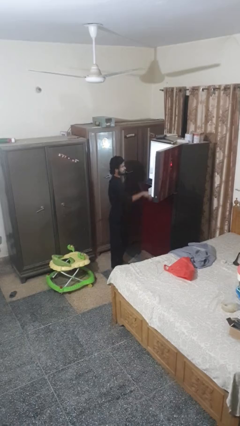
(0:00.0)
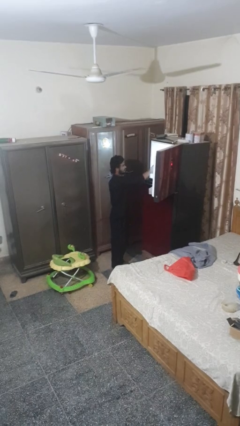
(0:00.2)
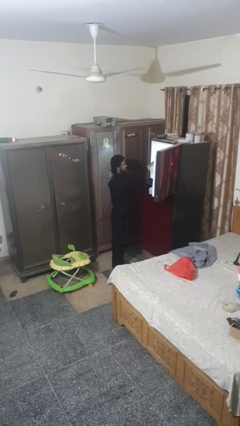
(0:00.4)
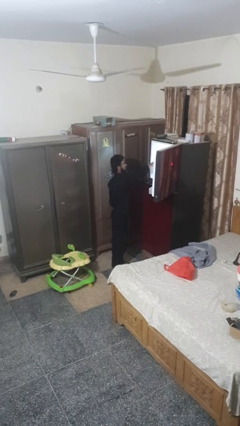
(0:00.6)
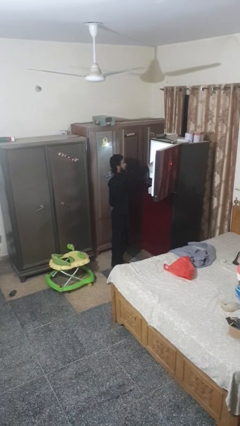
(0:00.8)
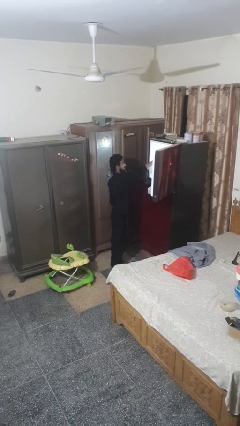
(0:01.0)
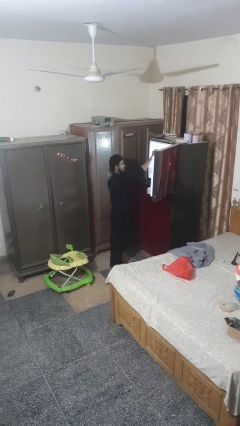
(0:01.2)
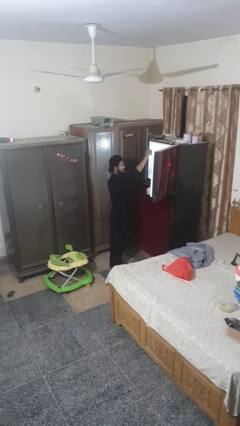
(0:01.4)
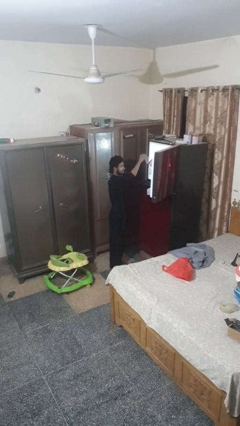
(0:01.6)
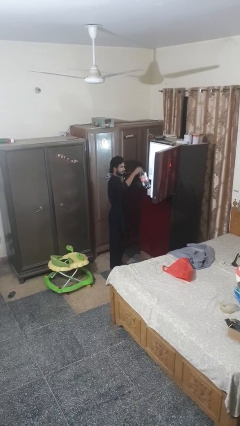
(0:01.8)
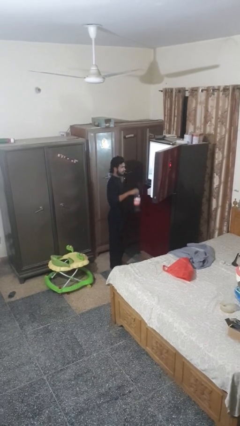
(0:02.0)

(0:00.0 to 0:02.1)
person takes object from refrigerator

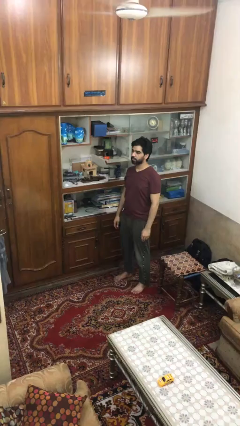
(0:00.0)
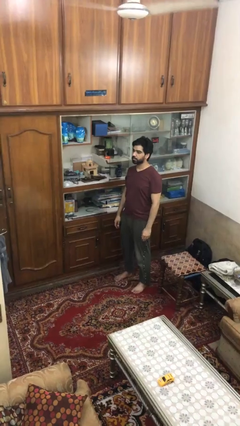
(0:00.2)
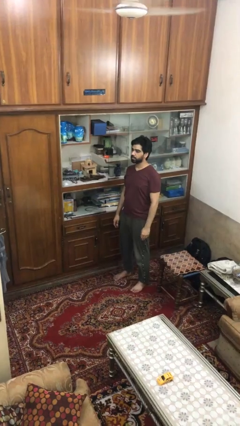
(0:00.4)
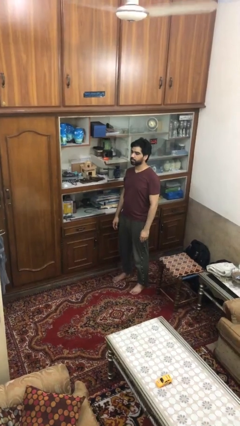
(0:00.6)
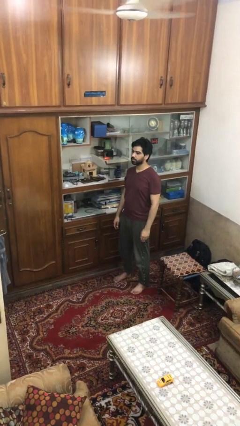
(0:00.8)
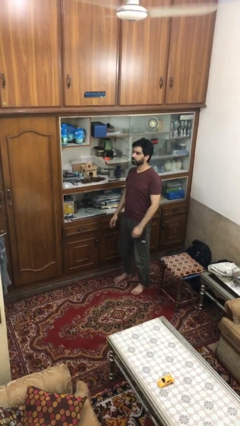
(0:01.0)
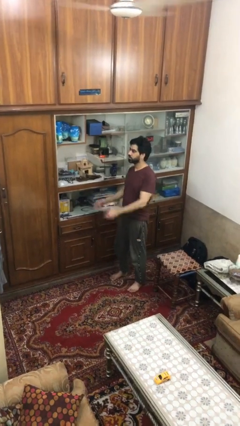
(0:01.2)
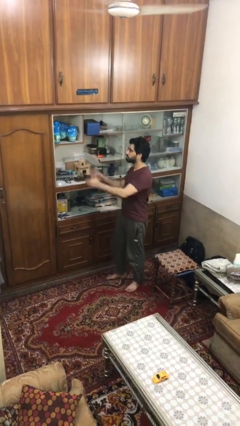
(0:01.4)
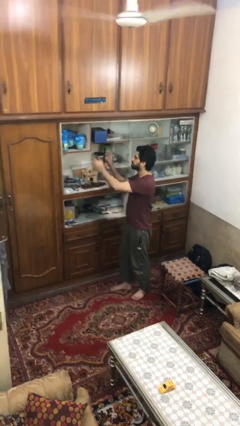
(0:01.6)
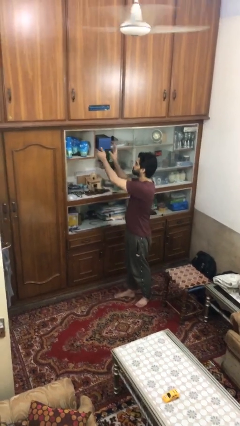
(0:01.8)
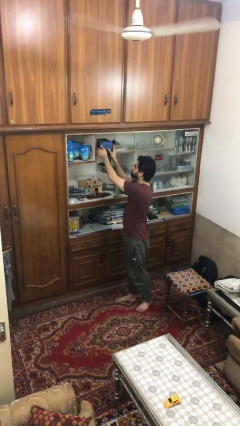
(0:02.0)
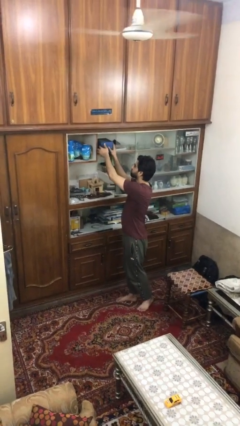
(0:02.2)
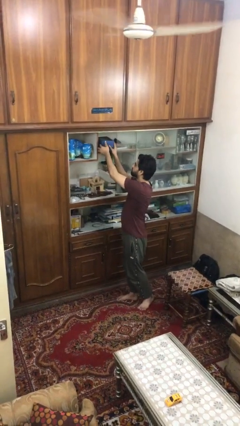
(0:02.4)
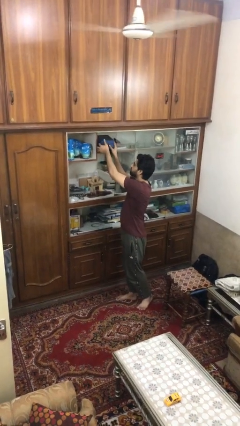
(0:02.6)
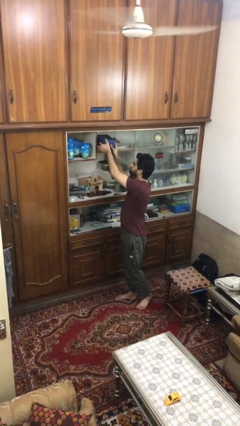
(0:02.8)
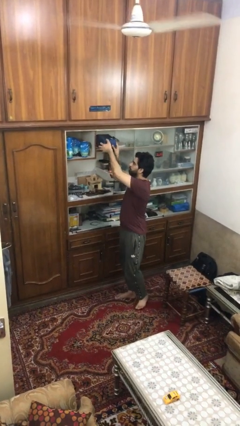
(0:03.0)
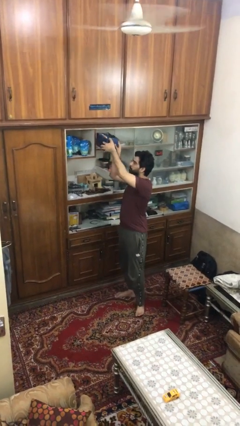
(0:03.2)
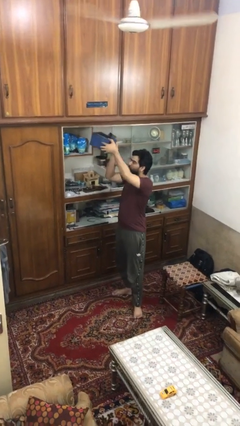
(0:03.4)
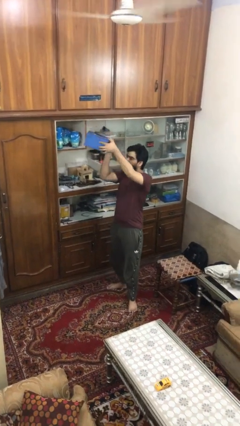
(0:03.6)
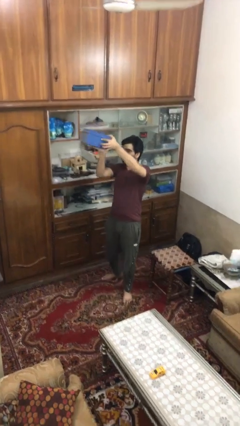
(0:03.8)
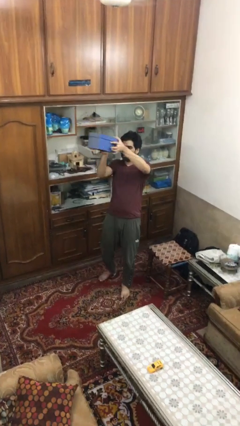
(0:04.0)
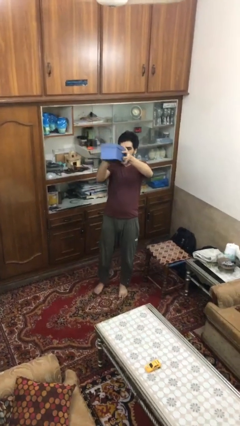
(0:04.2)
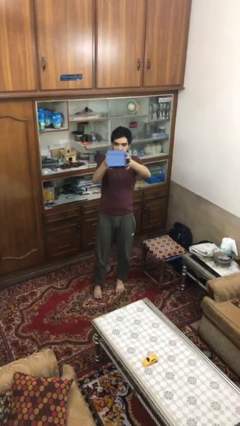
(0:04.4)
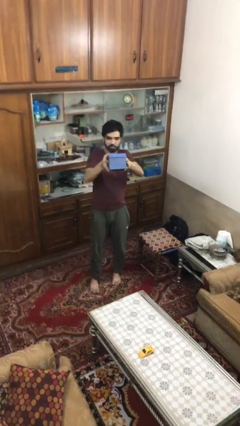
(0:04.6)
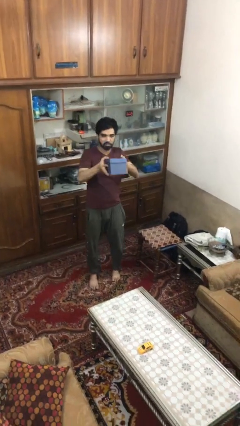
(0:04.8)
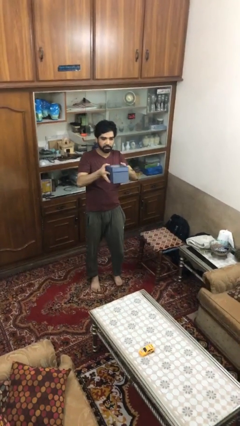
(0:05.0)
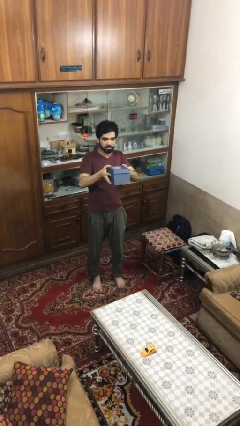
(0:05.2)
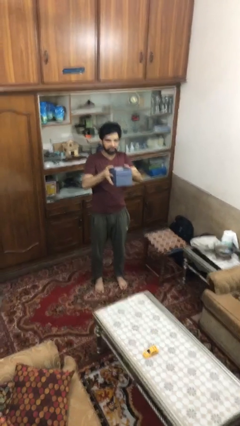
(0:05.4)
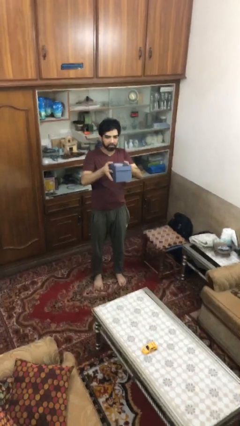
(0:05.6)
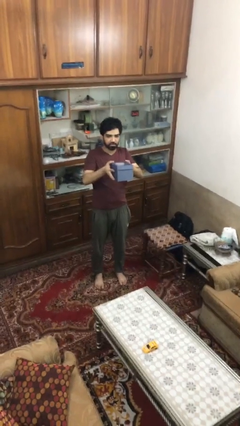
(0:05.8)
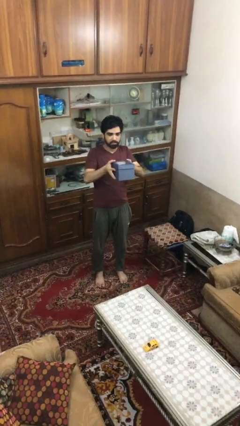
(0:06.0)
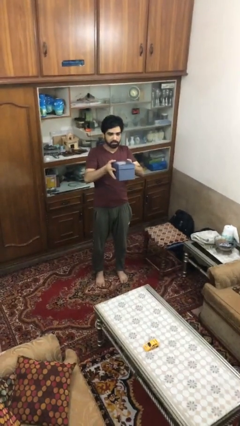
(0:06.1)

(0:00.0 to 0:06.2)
person picks up object from shelf

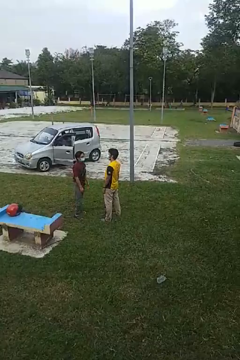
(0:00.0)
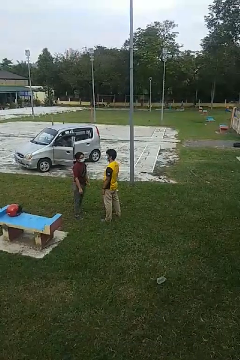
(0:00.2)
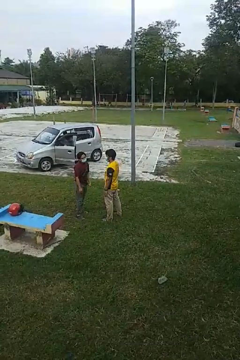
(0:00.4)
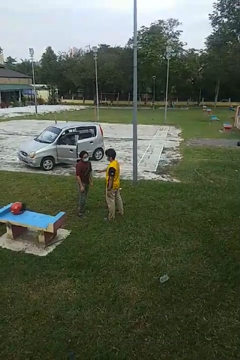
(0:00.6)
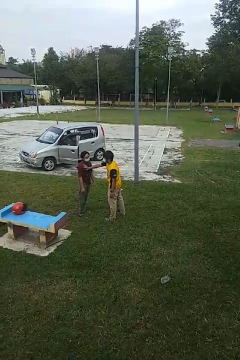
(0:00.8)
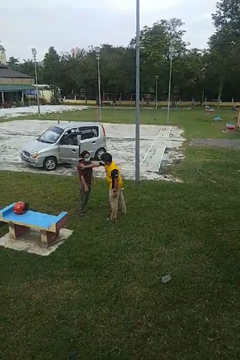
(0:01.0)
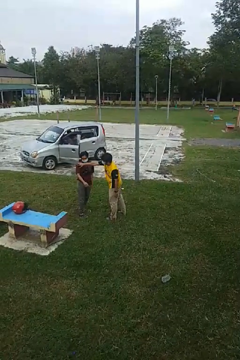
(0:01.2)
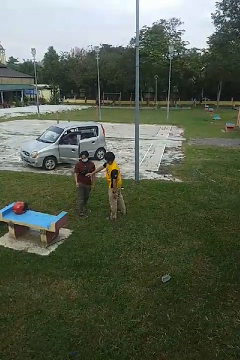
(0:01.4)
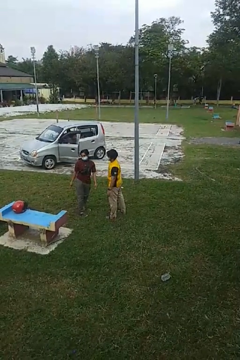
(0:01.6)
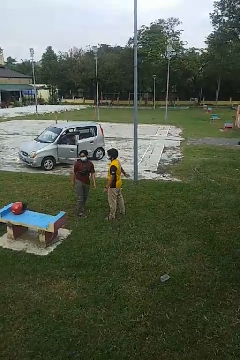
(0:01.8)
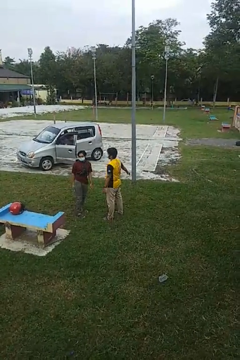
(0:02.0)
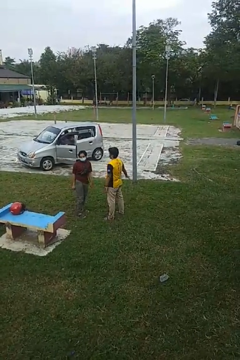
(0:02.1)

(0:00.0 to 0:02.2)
person shoves person

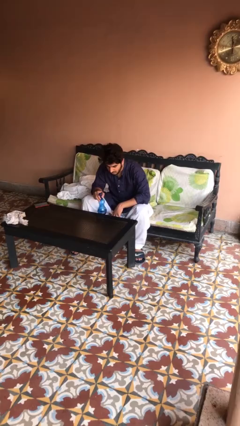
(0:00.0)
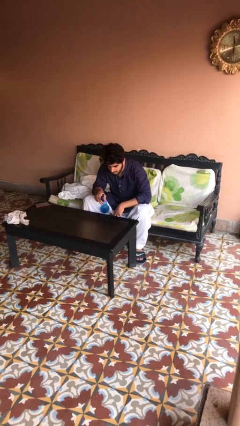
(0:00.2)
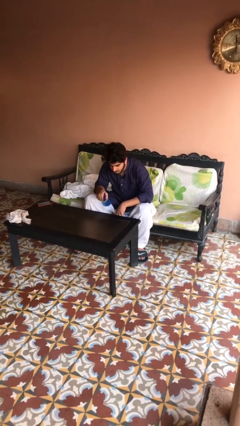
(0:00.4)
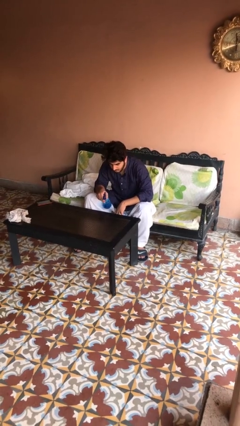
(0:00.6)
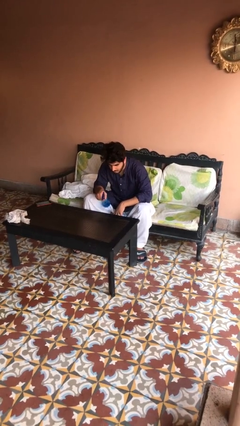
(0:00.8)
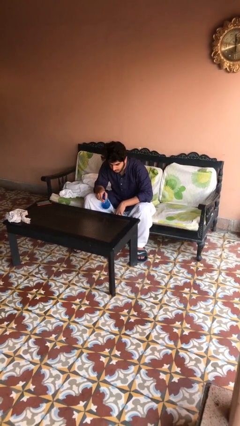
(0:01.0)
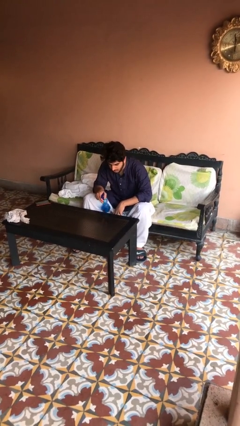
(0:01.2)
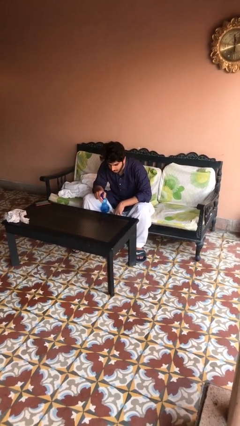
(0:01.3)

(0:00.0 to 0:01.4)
person sprays from bottle

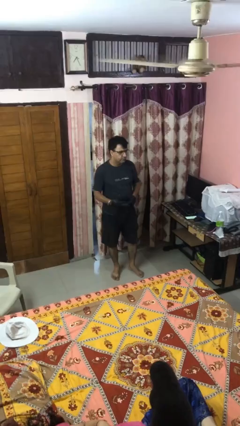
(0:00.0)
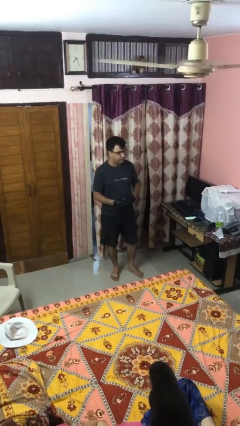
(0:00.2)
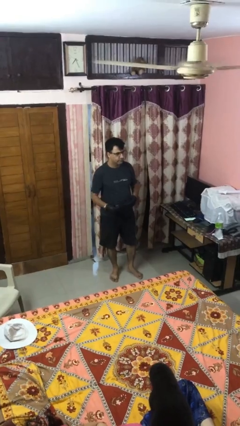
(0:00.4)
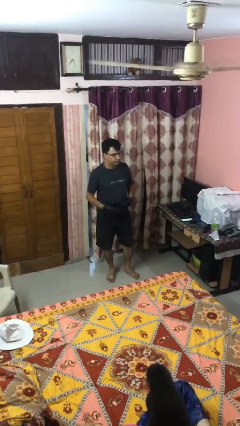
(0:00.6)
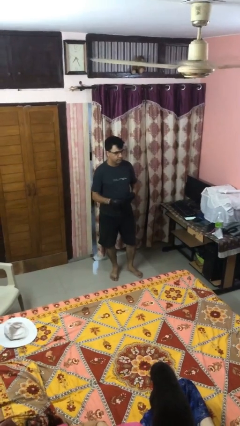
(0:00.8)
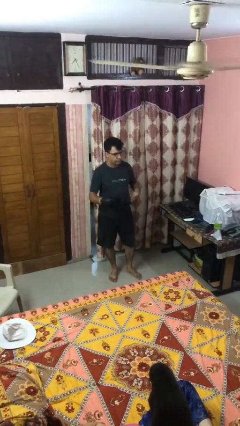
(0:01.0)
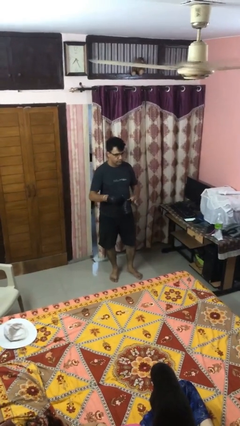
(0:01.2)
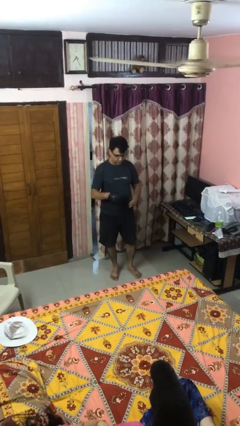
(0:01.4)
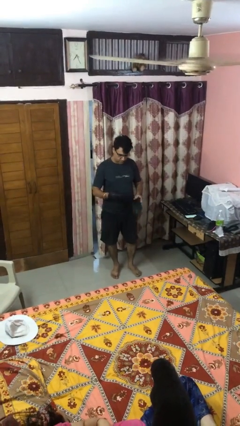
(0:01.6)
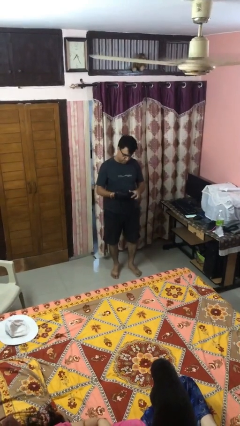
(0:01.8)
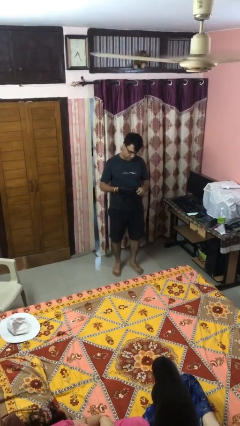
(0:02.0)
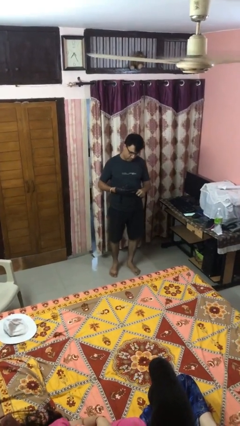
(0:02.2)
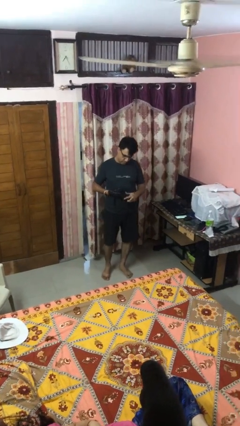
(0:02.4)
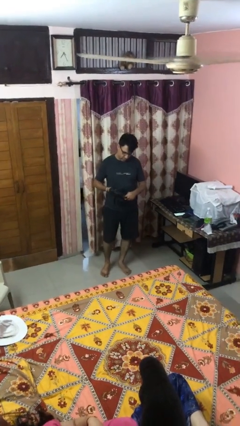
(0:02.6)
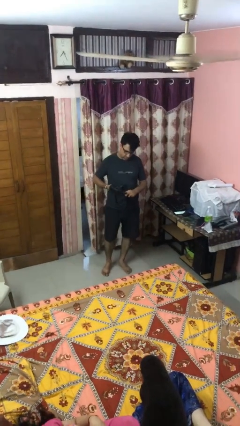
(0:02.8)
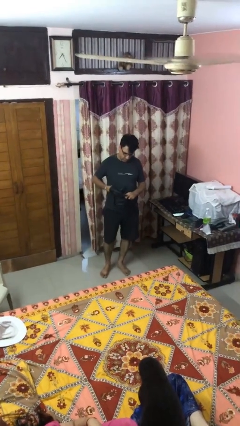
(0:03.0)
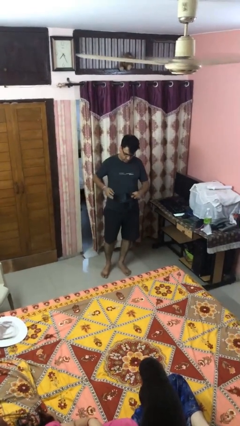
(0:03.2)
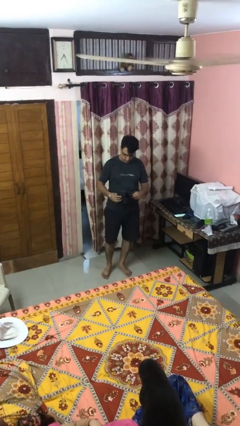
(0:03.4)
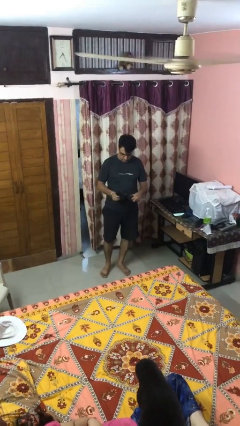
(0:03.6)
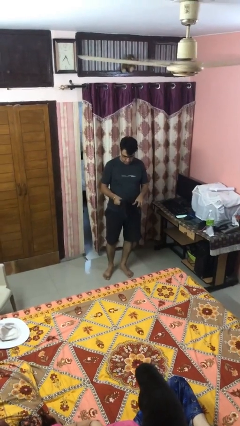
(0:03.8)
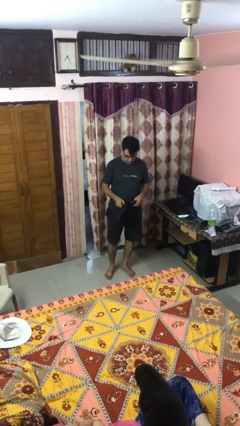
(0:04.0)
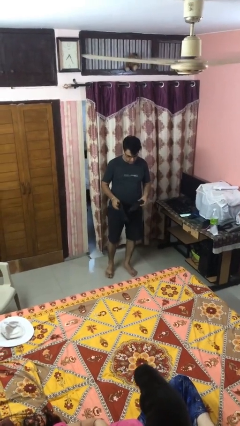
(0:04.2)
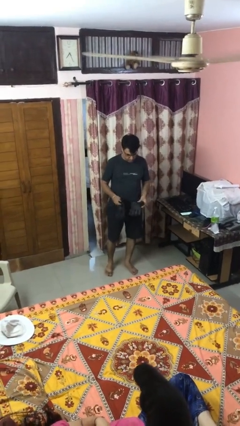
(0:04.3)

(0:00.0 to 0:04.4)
person takes off gloves

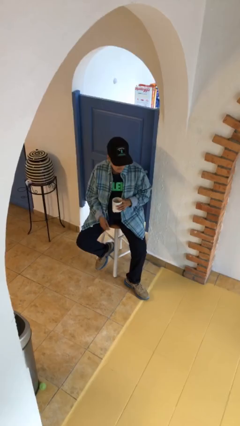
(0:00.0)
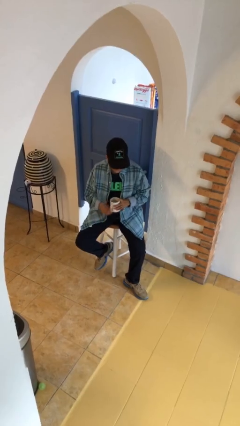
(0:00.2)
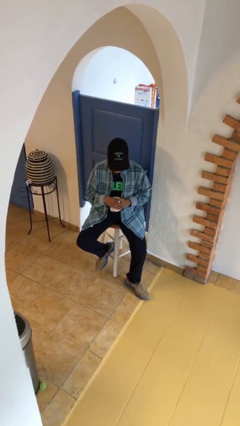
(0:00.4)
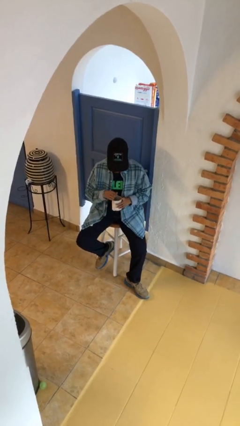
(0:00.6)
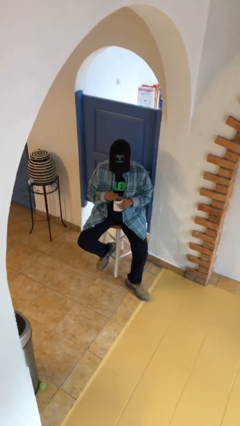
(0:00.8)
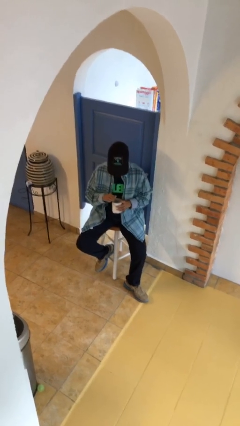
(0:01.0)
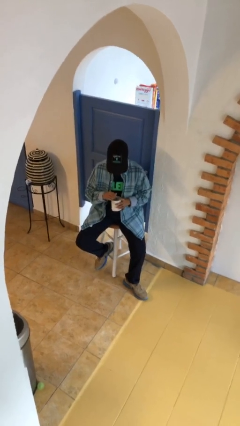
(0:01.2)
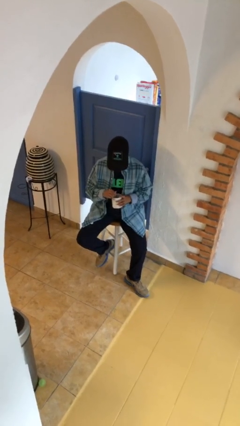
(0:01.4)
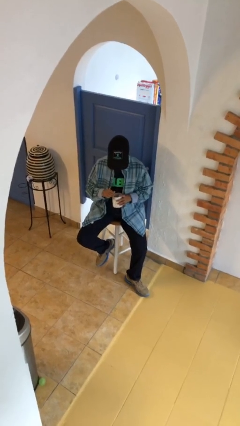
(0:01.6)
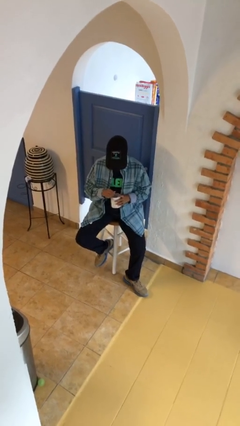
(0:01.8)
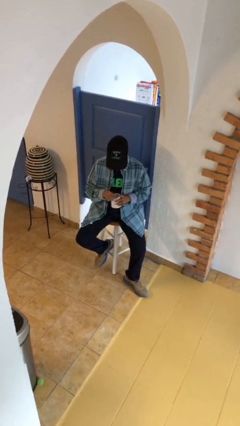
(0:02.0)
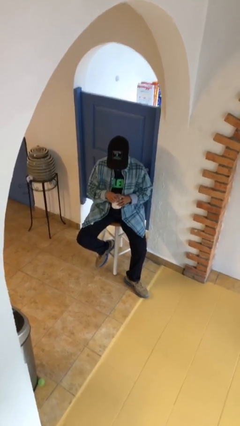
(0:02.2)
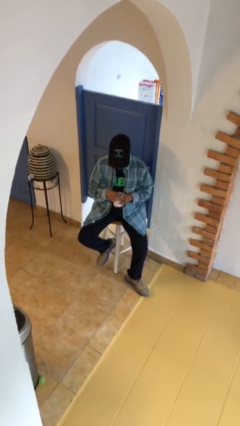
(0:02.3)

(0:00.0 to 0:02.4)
person stirs mug
